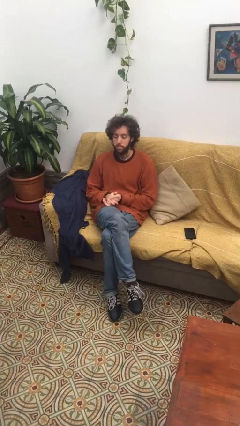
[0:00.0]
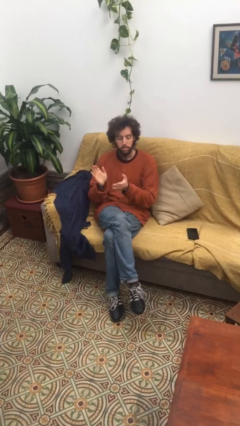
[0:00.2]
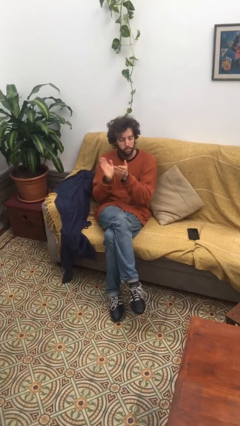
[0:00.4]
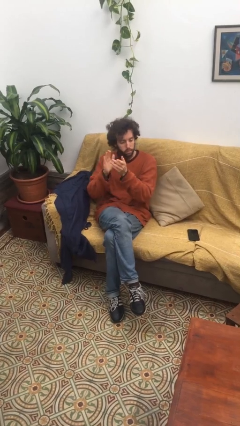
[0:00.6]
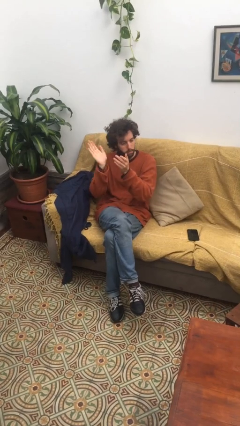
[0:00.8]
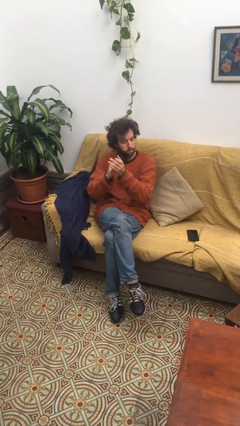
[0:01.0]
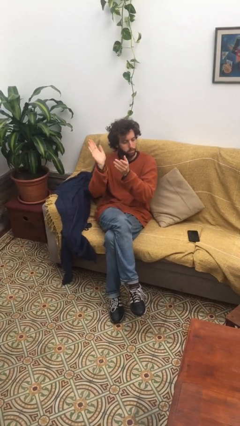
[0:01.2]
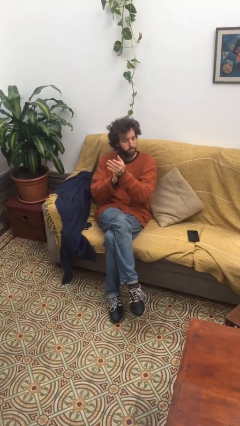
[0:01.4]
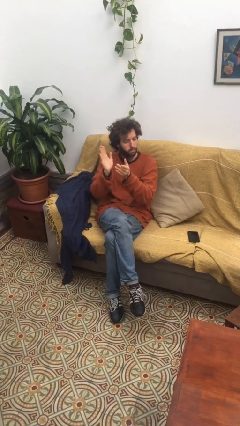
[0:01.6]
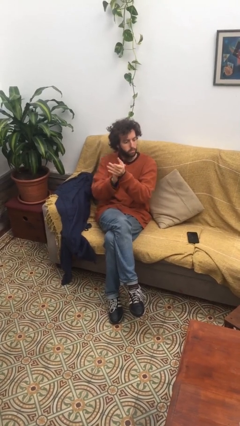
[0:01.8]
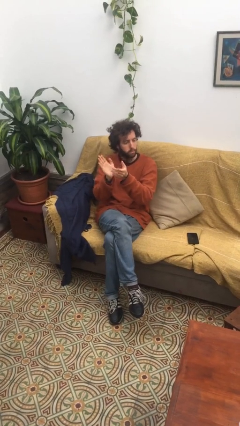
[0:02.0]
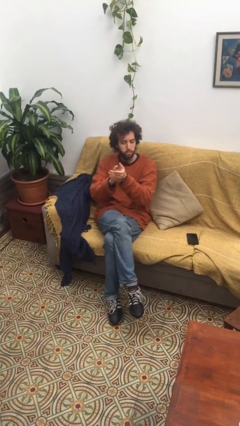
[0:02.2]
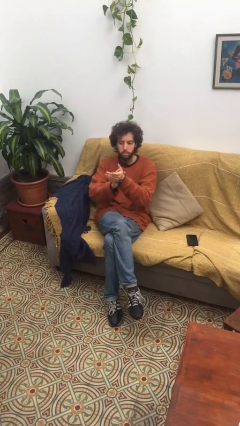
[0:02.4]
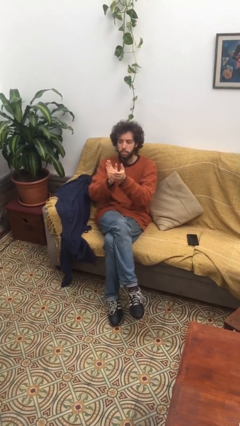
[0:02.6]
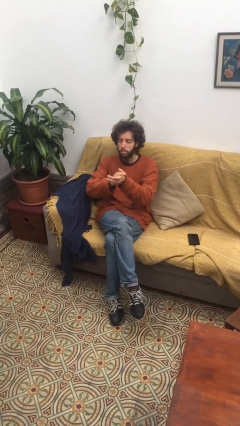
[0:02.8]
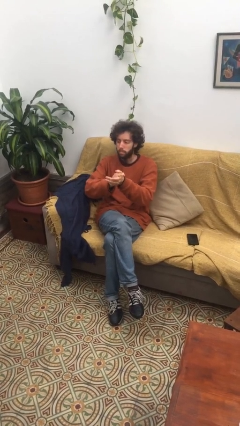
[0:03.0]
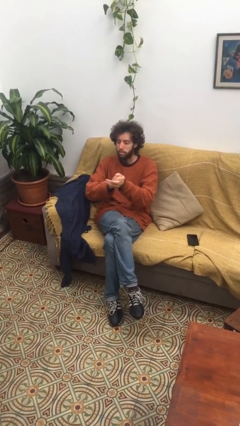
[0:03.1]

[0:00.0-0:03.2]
person claps hands

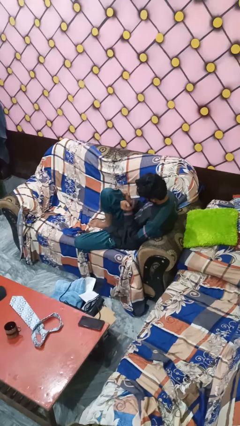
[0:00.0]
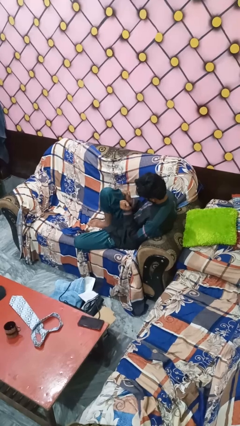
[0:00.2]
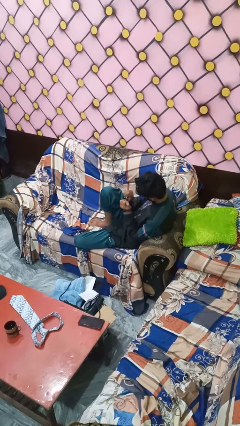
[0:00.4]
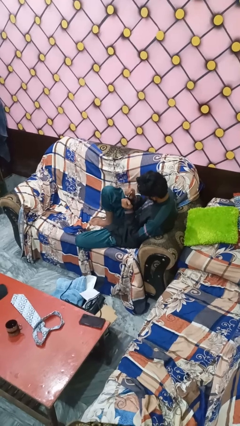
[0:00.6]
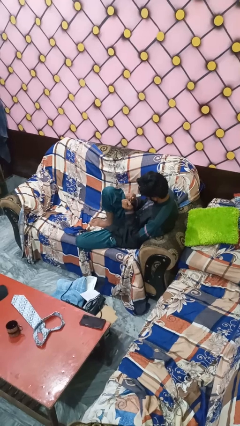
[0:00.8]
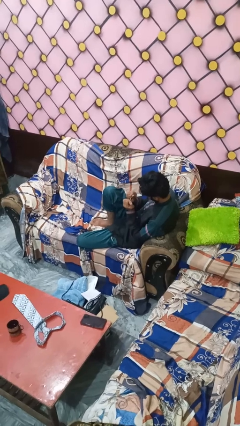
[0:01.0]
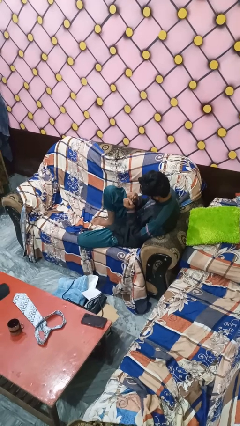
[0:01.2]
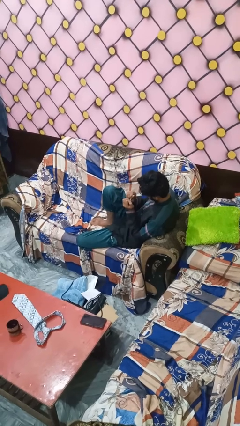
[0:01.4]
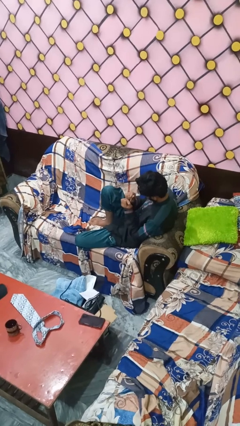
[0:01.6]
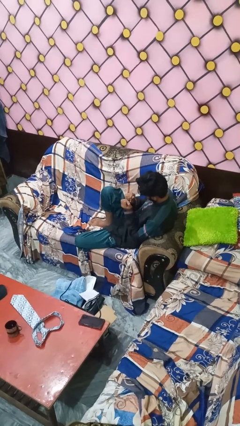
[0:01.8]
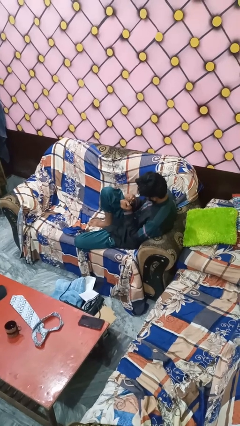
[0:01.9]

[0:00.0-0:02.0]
person paints fingernails

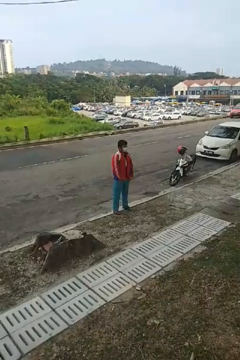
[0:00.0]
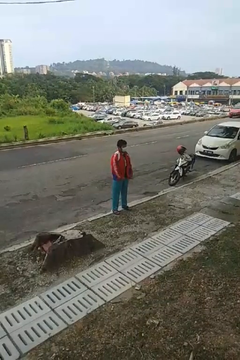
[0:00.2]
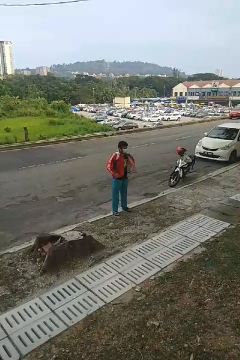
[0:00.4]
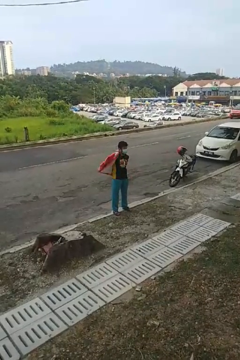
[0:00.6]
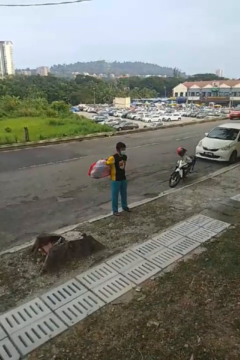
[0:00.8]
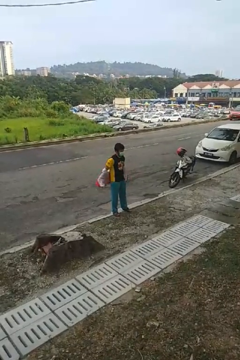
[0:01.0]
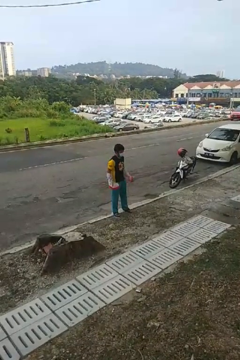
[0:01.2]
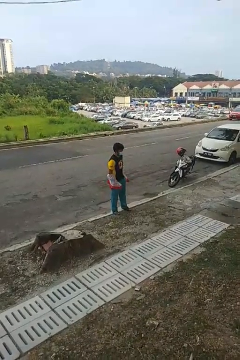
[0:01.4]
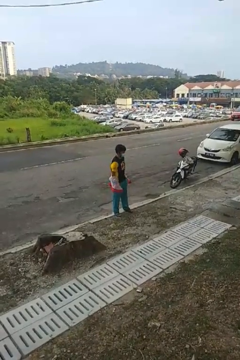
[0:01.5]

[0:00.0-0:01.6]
person takes off jacket

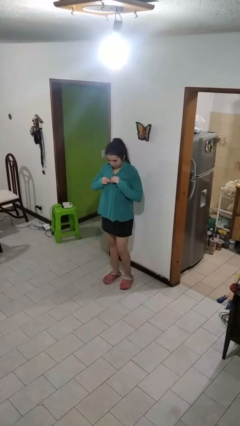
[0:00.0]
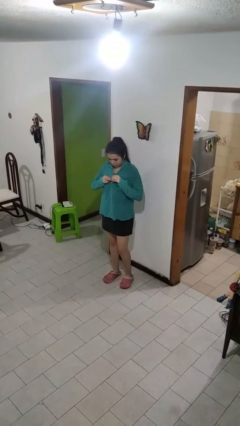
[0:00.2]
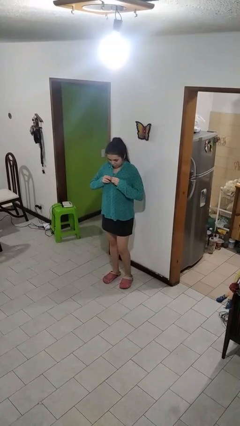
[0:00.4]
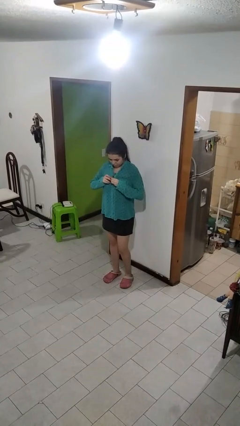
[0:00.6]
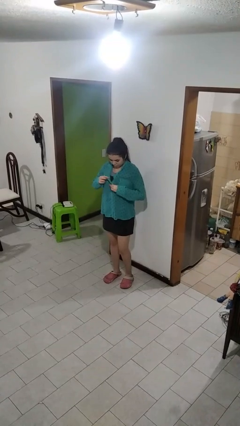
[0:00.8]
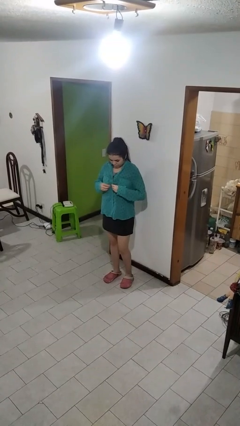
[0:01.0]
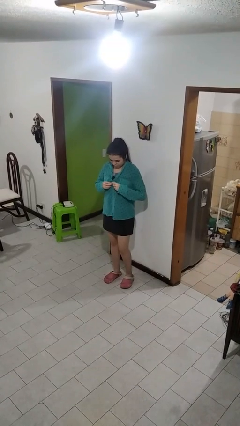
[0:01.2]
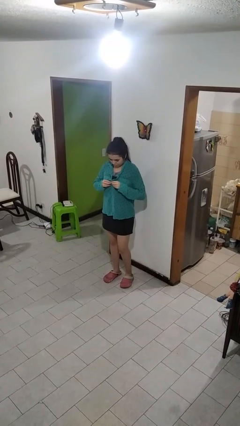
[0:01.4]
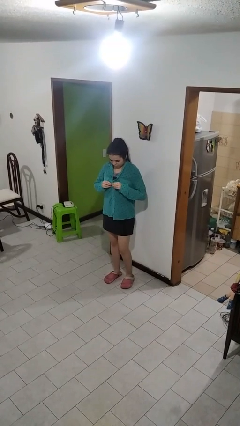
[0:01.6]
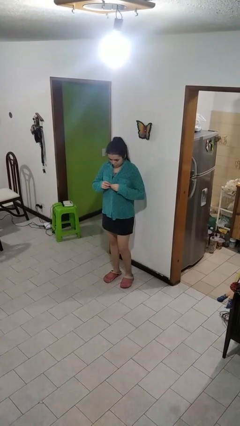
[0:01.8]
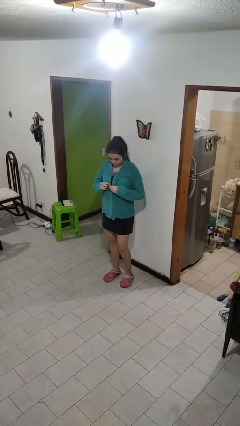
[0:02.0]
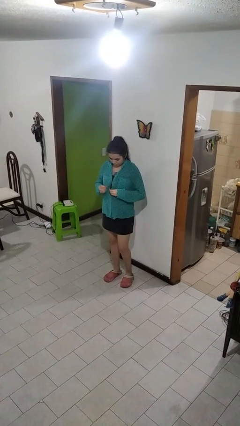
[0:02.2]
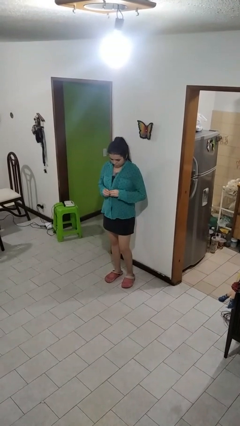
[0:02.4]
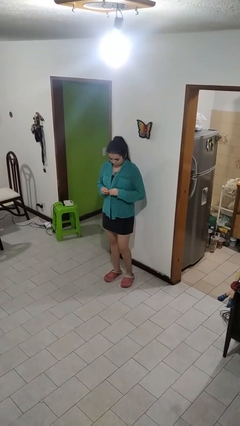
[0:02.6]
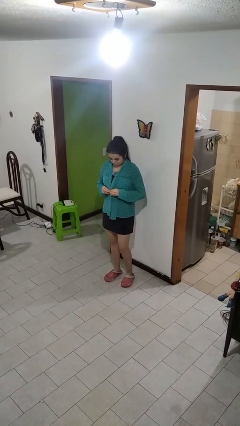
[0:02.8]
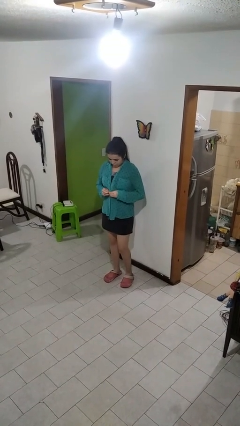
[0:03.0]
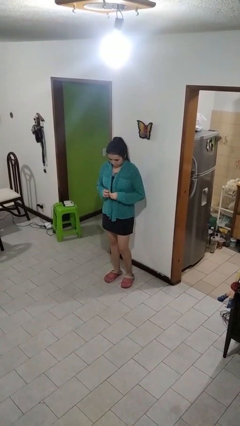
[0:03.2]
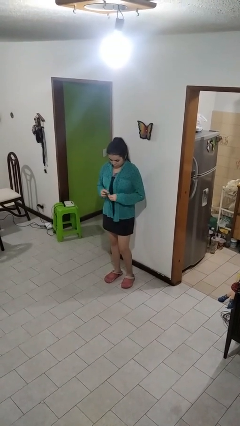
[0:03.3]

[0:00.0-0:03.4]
person unbuttons shirt

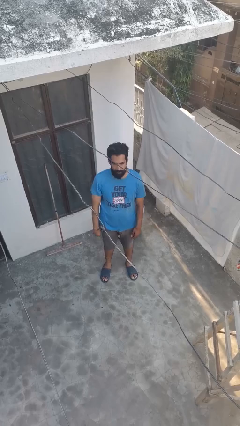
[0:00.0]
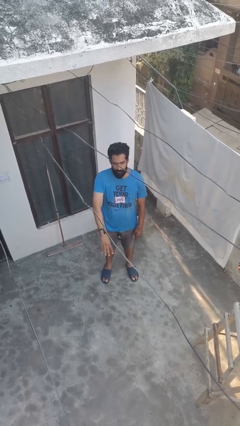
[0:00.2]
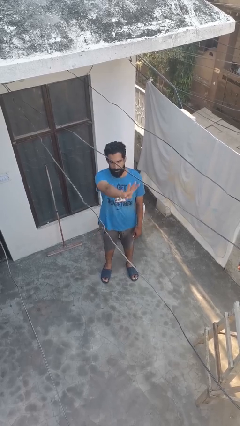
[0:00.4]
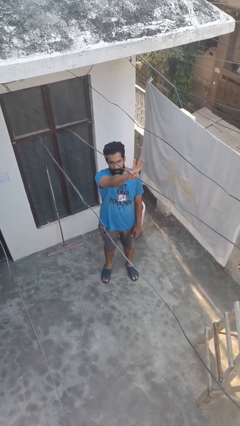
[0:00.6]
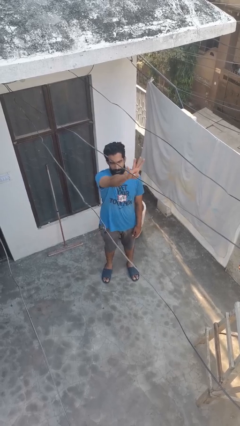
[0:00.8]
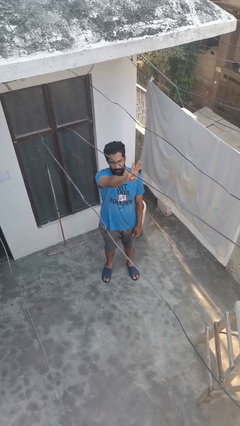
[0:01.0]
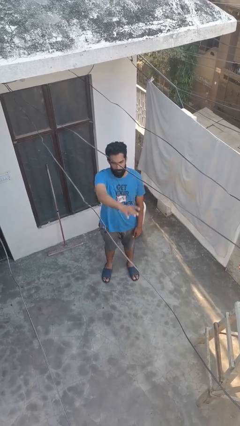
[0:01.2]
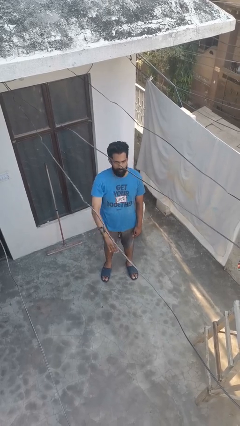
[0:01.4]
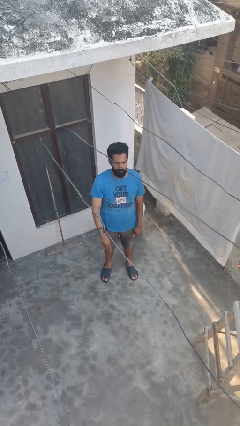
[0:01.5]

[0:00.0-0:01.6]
person gestures number four

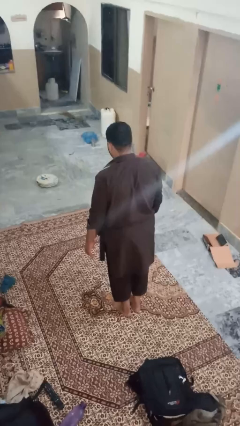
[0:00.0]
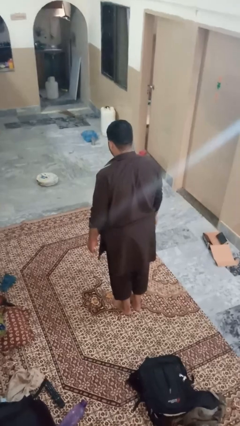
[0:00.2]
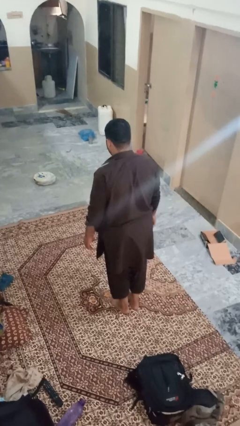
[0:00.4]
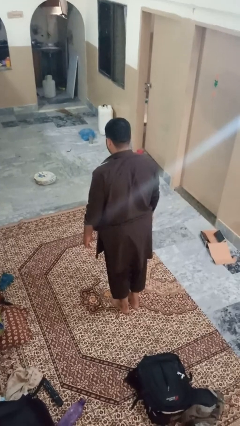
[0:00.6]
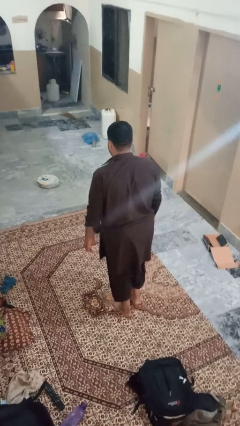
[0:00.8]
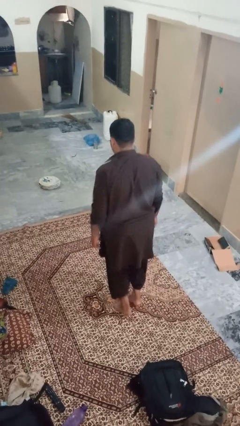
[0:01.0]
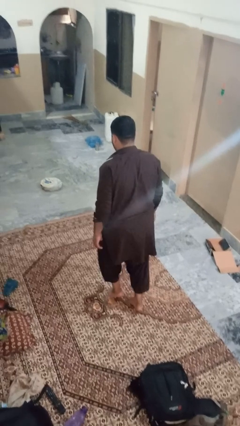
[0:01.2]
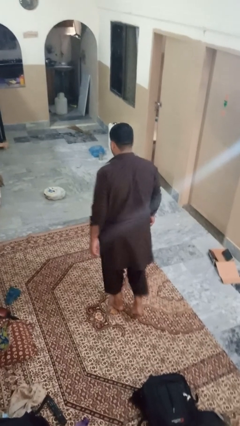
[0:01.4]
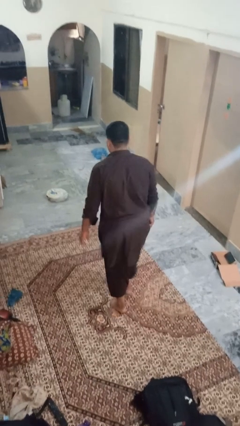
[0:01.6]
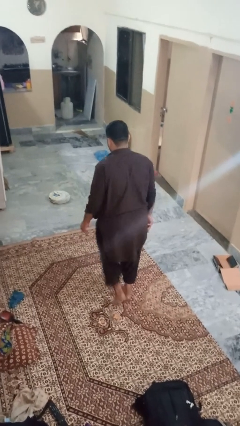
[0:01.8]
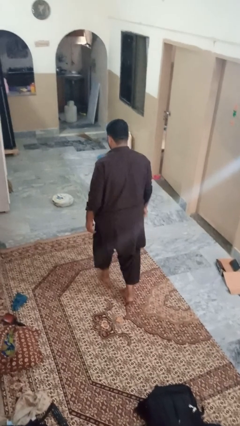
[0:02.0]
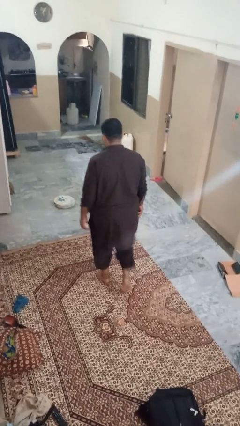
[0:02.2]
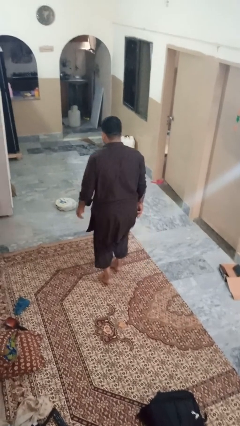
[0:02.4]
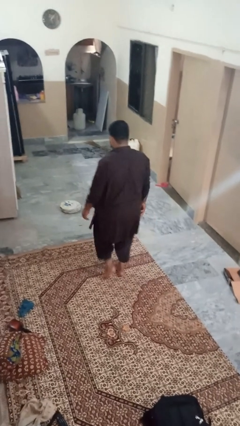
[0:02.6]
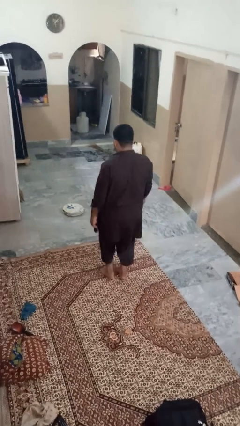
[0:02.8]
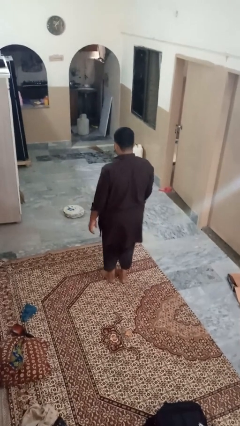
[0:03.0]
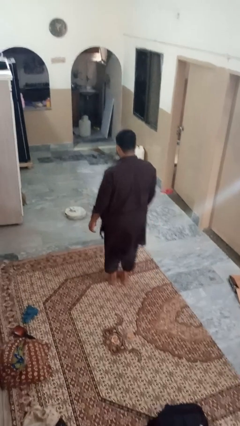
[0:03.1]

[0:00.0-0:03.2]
person walks tiptoe

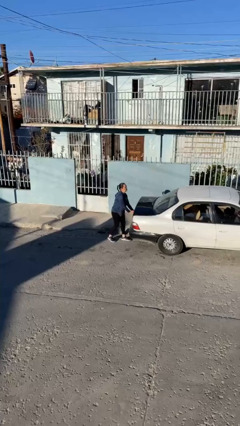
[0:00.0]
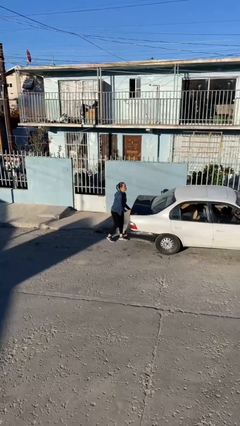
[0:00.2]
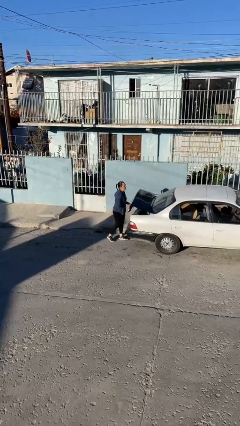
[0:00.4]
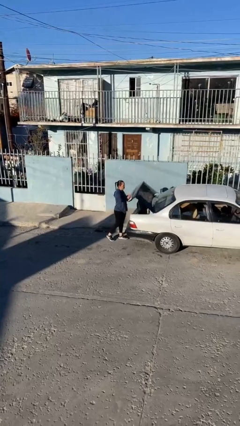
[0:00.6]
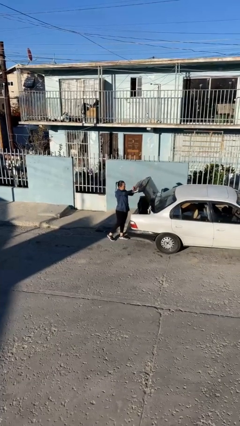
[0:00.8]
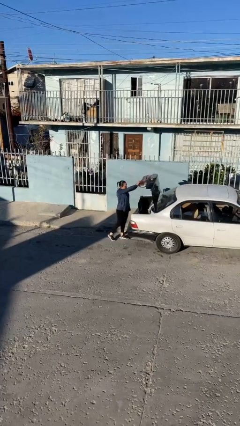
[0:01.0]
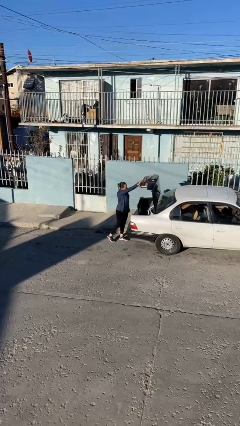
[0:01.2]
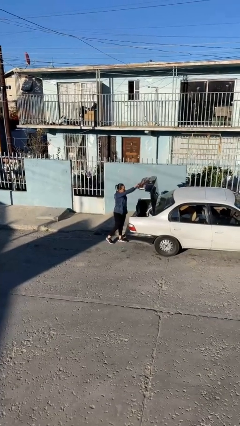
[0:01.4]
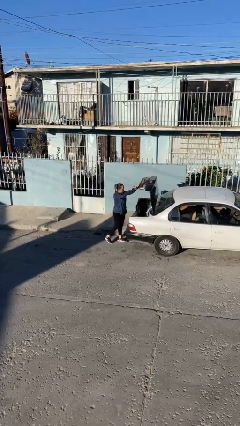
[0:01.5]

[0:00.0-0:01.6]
person opens car trunk

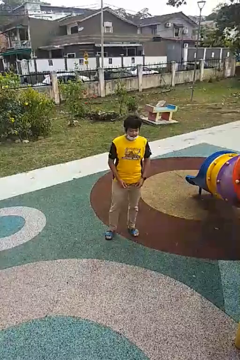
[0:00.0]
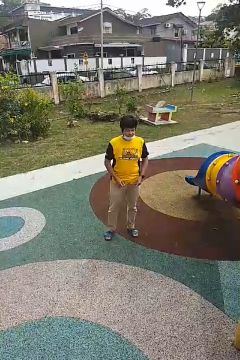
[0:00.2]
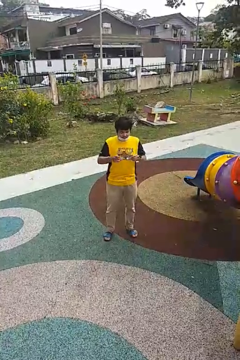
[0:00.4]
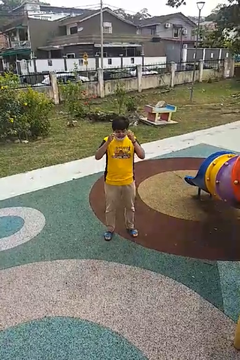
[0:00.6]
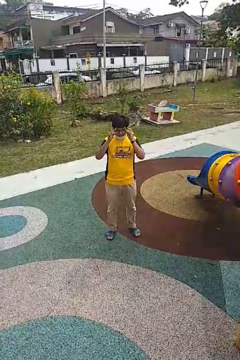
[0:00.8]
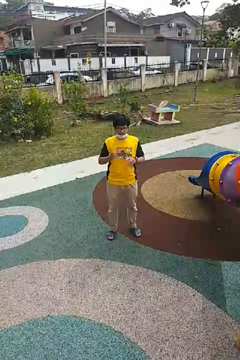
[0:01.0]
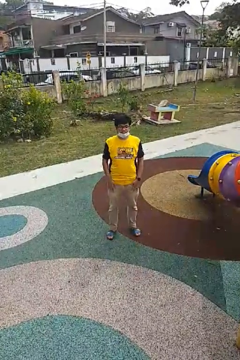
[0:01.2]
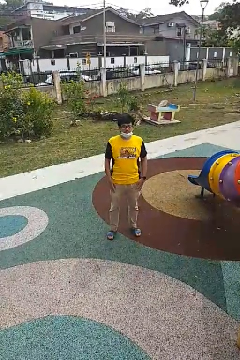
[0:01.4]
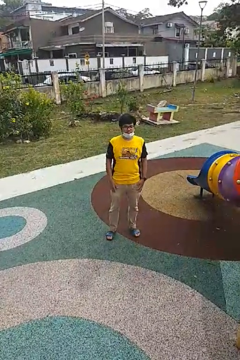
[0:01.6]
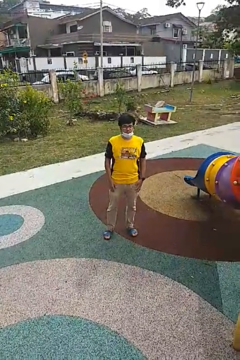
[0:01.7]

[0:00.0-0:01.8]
person puts on glasses
